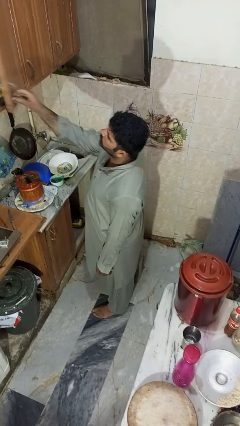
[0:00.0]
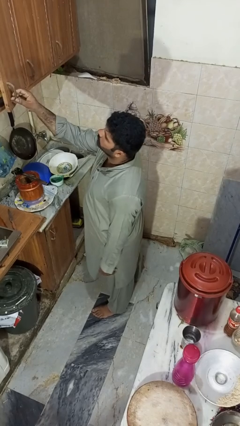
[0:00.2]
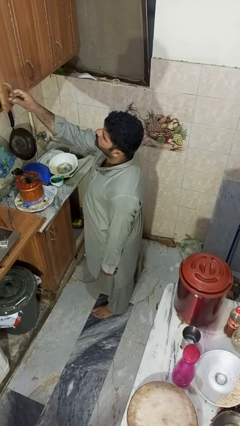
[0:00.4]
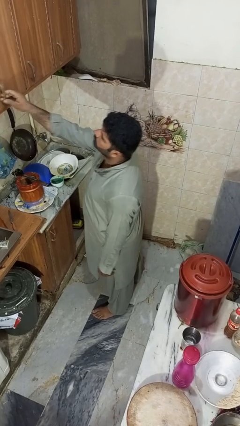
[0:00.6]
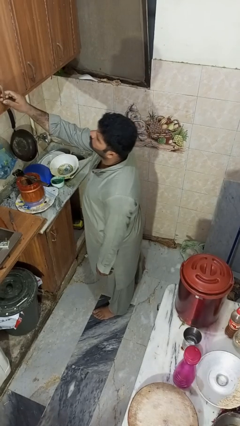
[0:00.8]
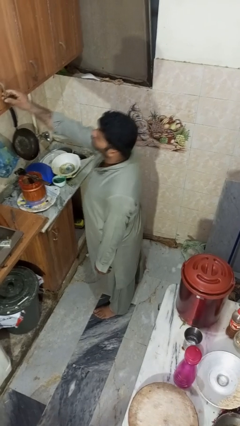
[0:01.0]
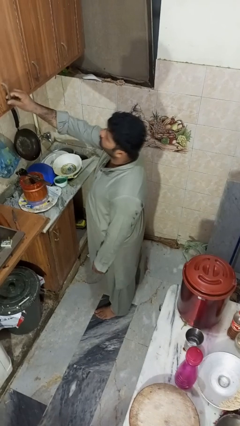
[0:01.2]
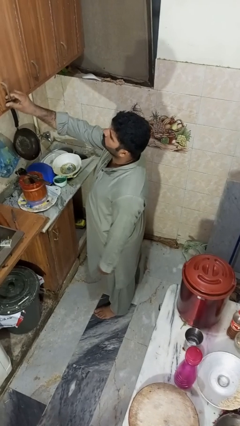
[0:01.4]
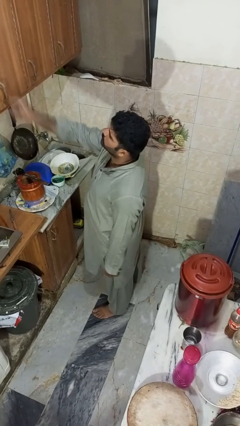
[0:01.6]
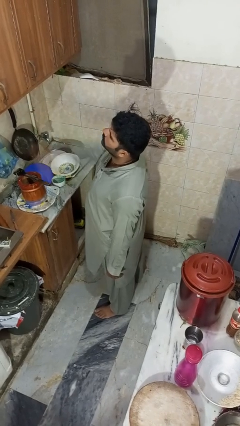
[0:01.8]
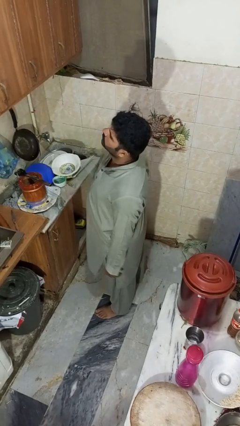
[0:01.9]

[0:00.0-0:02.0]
person closes cabinet

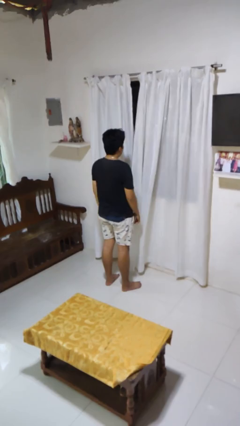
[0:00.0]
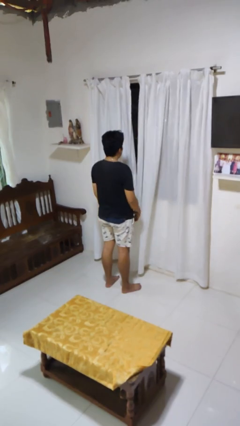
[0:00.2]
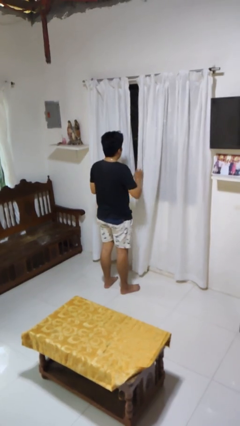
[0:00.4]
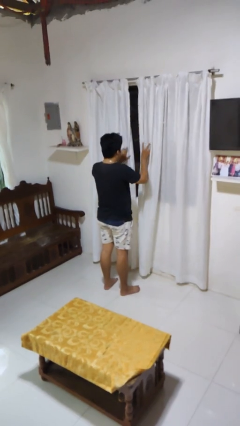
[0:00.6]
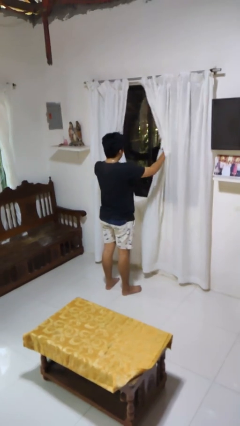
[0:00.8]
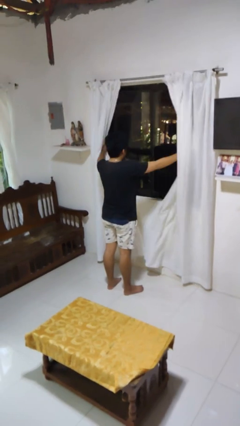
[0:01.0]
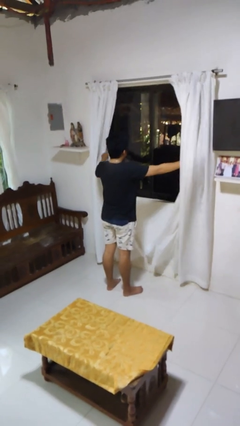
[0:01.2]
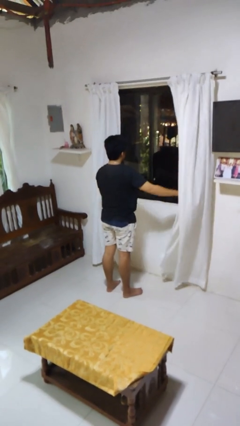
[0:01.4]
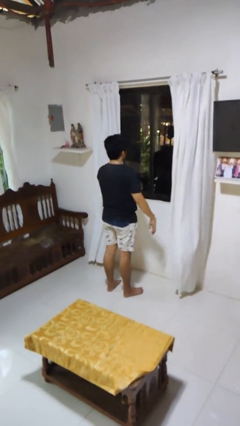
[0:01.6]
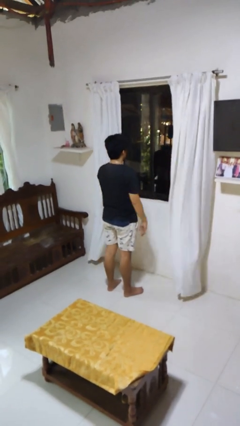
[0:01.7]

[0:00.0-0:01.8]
person opens curtains

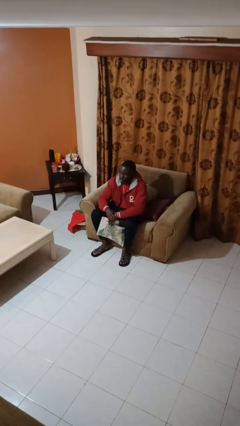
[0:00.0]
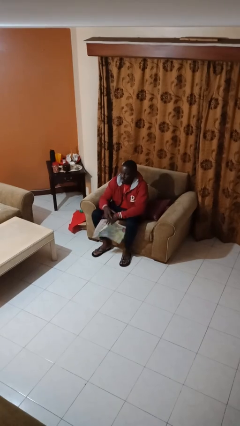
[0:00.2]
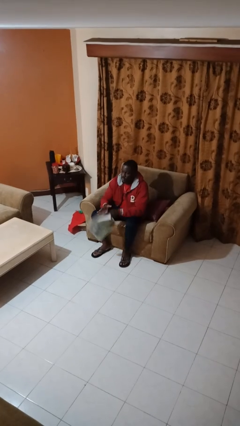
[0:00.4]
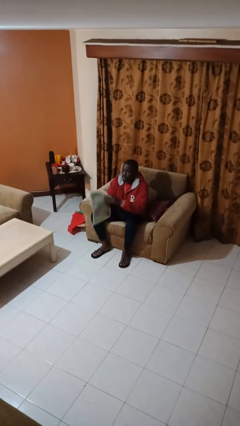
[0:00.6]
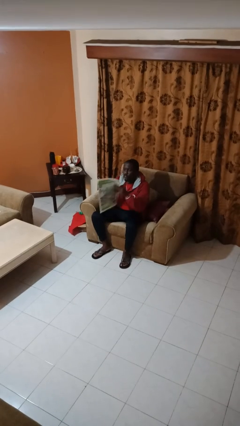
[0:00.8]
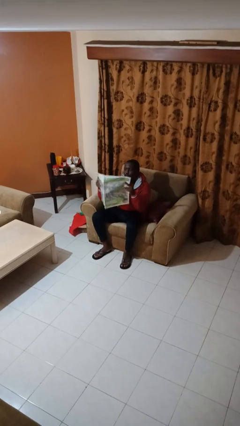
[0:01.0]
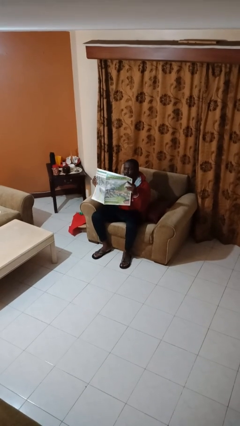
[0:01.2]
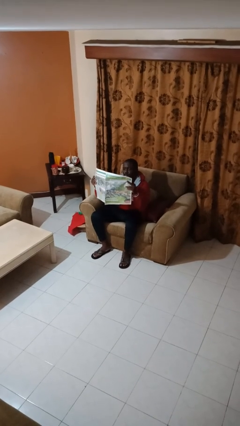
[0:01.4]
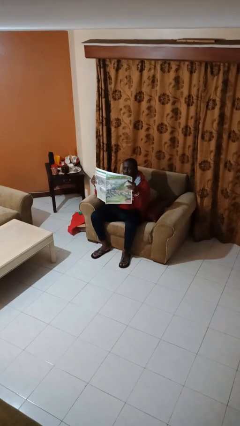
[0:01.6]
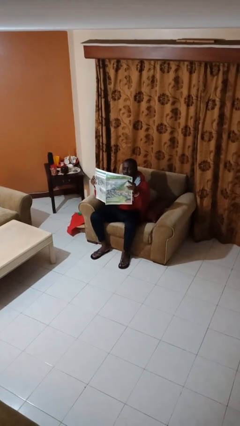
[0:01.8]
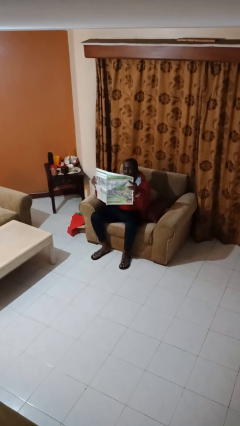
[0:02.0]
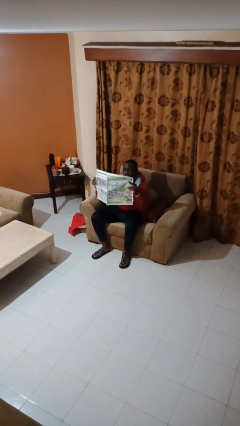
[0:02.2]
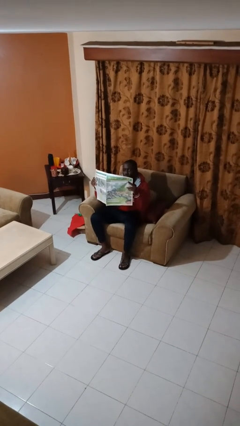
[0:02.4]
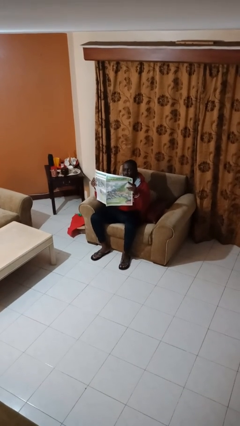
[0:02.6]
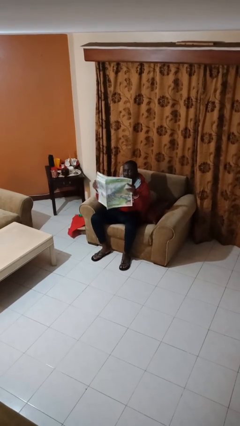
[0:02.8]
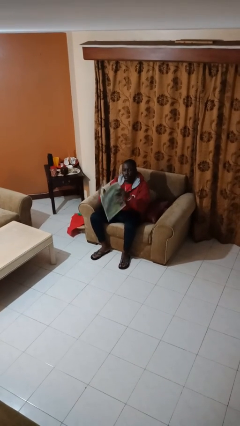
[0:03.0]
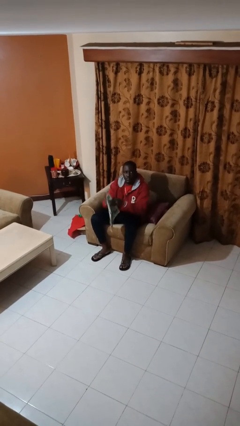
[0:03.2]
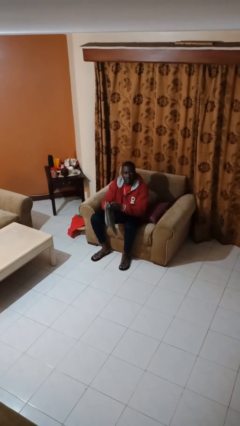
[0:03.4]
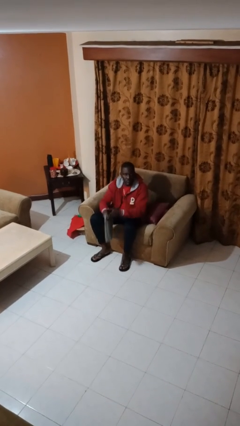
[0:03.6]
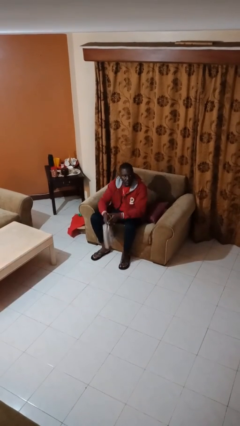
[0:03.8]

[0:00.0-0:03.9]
person reads newspaper

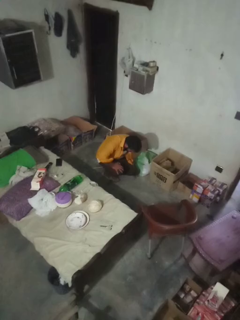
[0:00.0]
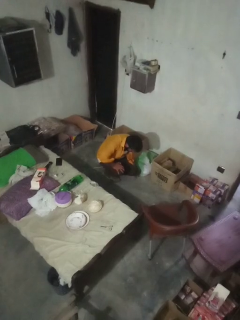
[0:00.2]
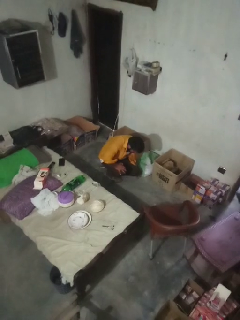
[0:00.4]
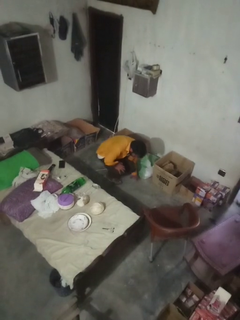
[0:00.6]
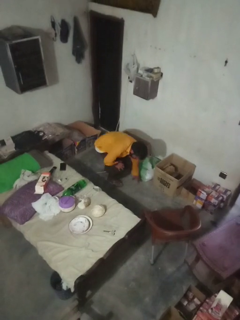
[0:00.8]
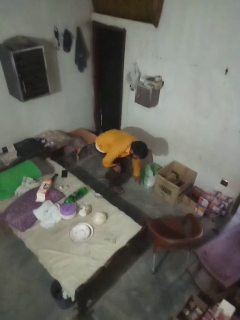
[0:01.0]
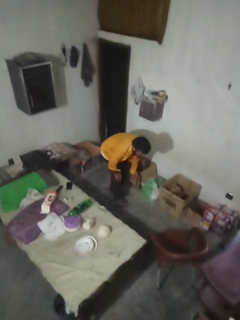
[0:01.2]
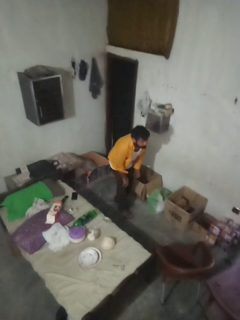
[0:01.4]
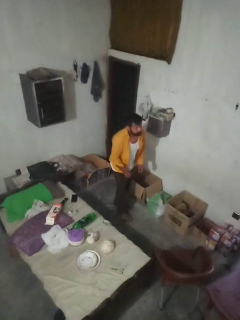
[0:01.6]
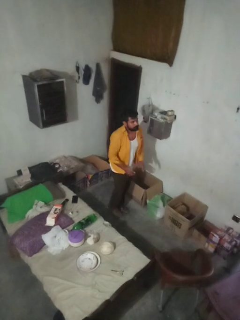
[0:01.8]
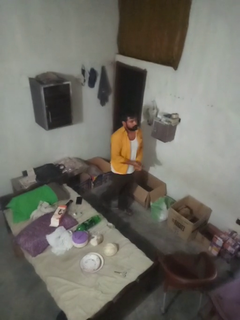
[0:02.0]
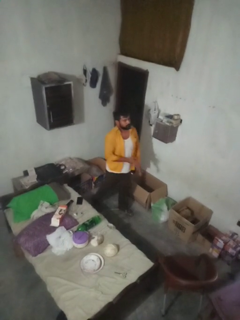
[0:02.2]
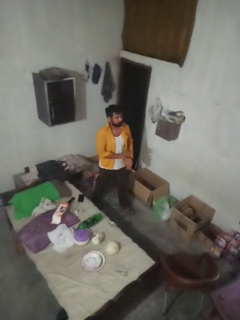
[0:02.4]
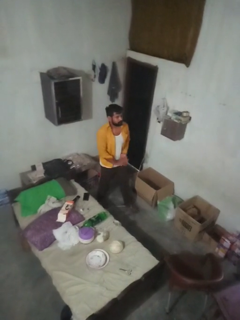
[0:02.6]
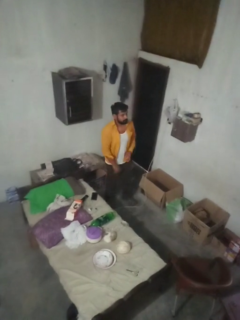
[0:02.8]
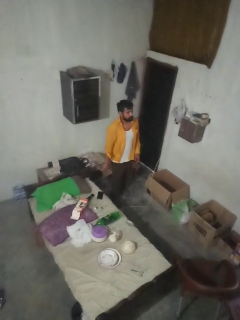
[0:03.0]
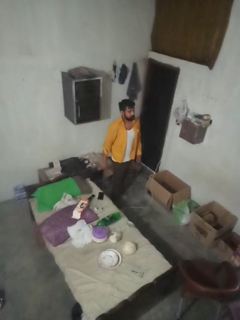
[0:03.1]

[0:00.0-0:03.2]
person stands up from floor

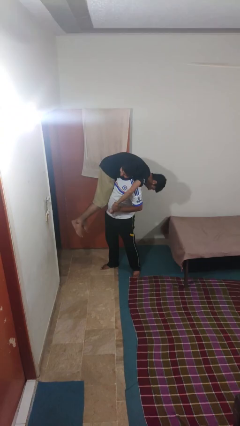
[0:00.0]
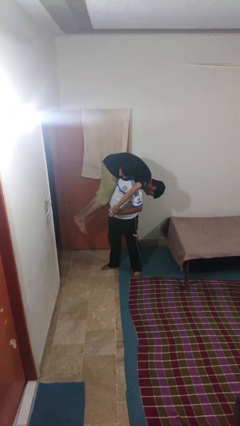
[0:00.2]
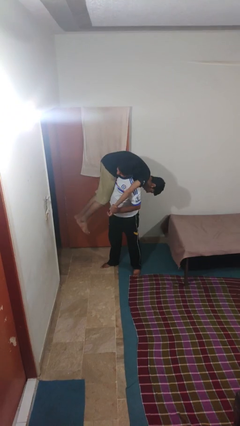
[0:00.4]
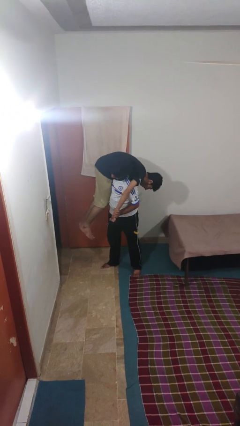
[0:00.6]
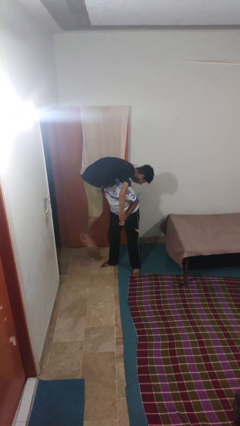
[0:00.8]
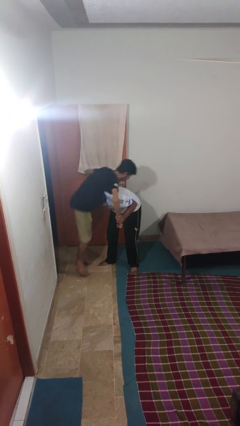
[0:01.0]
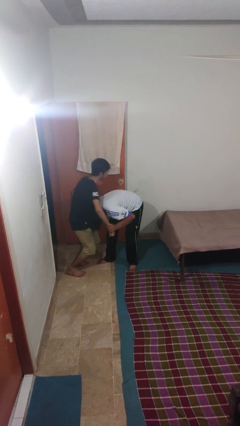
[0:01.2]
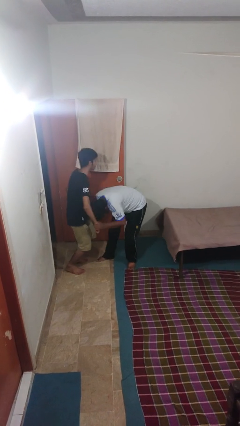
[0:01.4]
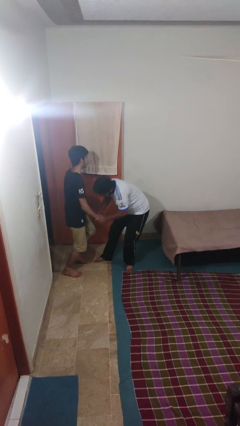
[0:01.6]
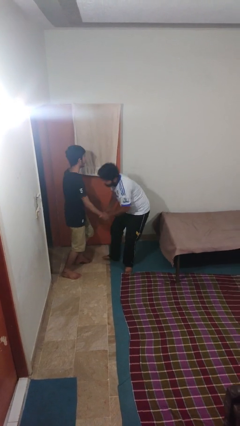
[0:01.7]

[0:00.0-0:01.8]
person puts down person

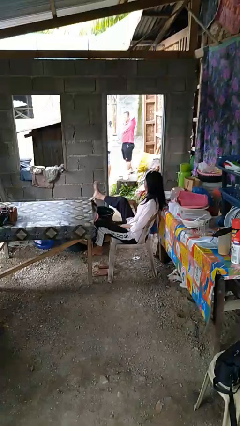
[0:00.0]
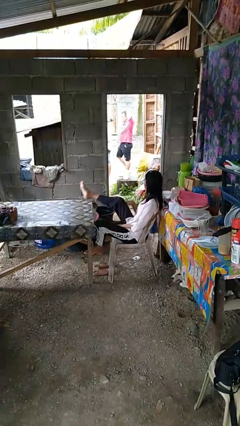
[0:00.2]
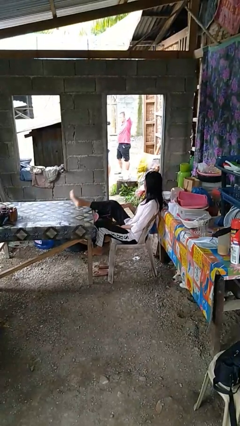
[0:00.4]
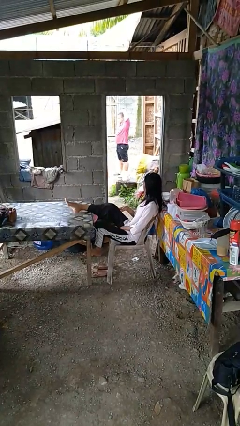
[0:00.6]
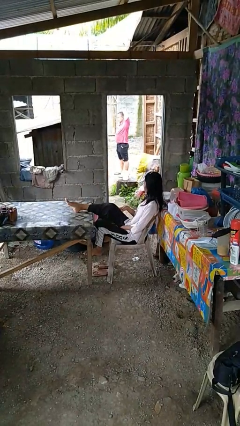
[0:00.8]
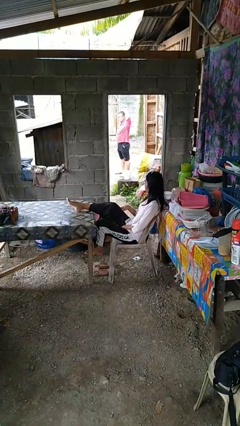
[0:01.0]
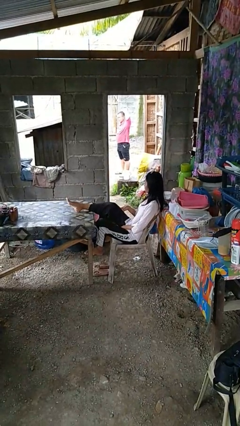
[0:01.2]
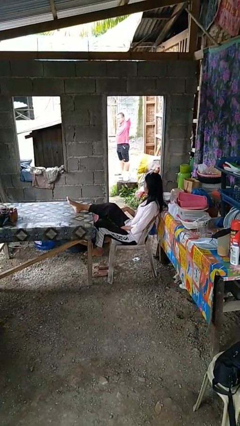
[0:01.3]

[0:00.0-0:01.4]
person puts feet up

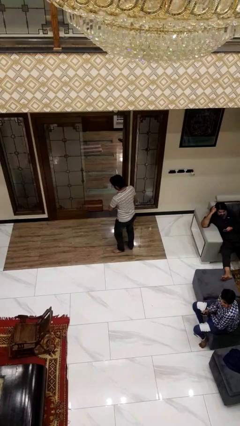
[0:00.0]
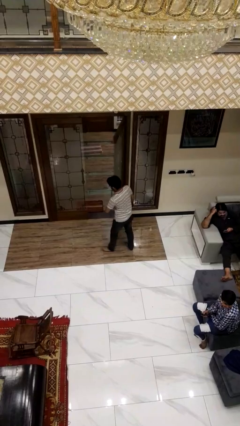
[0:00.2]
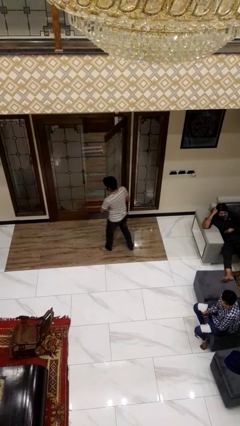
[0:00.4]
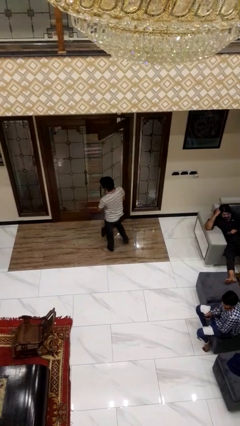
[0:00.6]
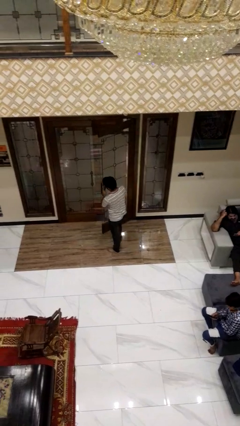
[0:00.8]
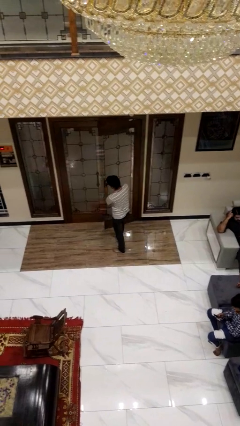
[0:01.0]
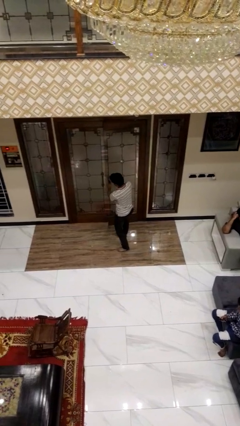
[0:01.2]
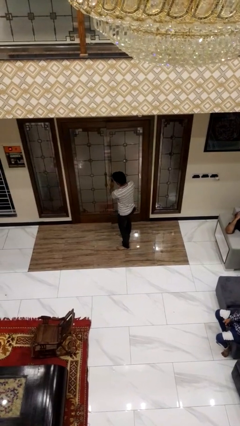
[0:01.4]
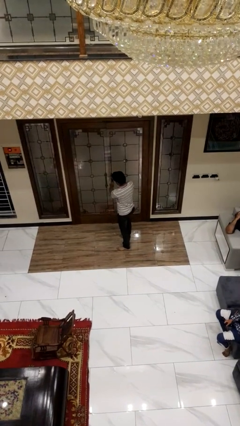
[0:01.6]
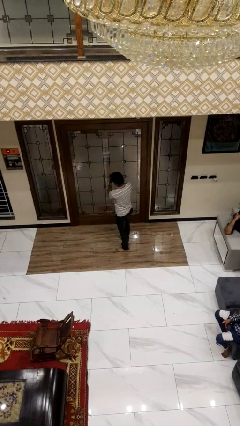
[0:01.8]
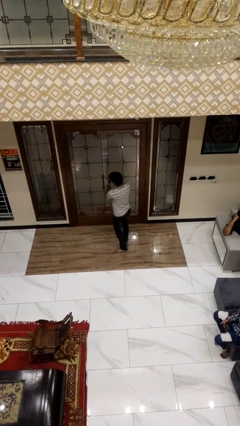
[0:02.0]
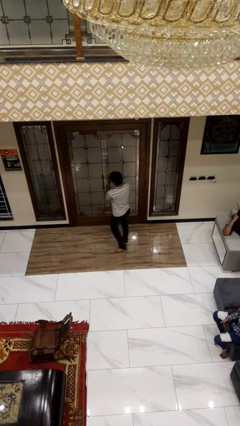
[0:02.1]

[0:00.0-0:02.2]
person closes facility door

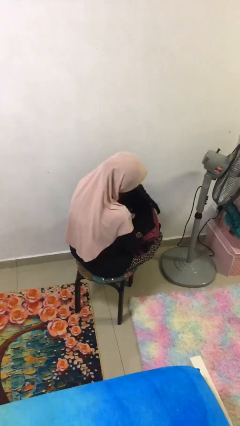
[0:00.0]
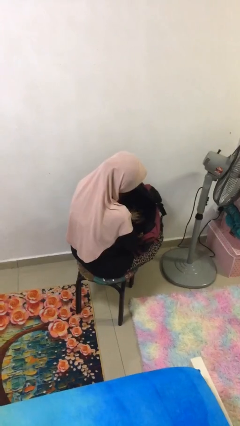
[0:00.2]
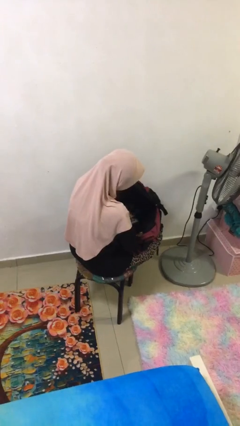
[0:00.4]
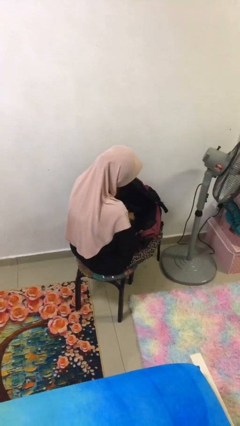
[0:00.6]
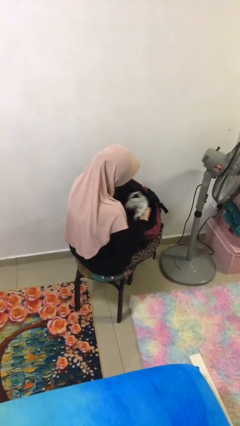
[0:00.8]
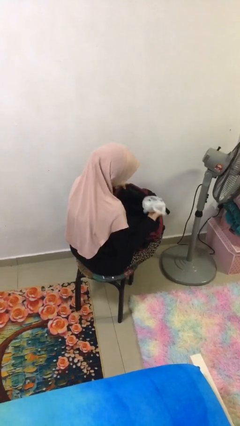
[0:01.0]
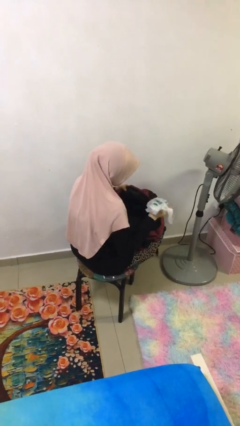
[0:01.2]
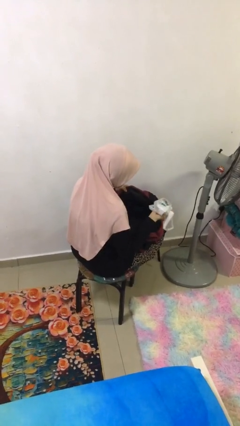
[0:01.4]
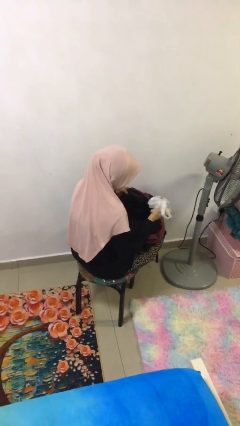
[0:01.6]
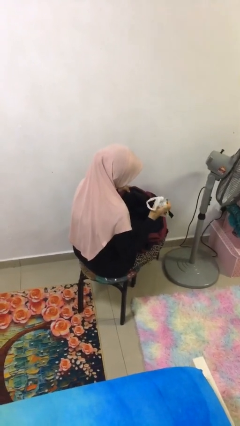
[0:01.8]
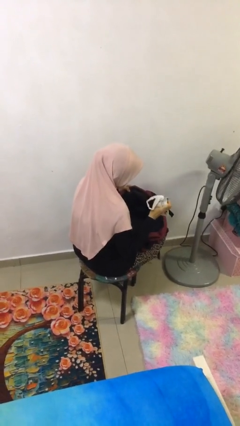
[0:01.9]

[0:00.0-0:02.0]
person takes object from backpack
